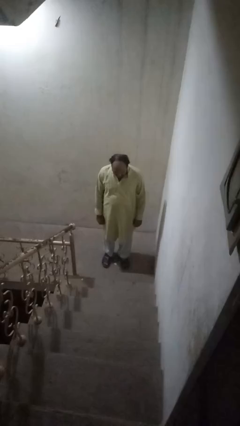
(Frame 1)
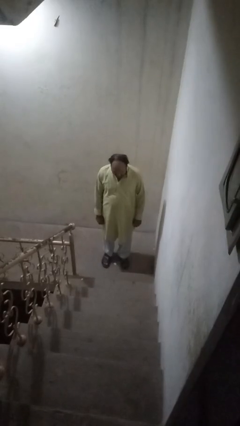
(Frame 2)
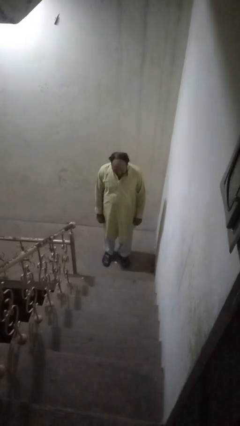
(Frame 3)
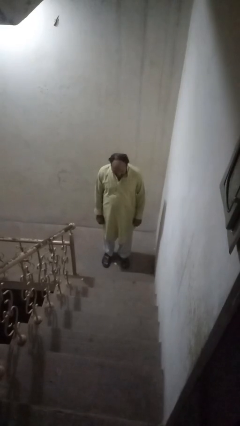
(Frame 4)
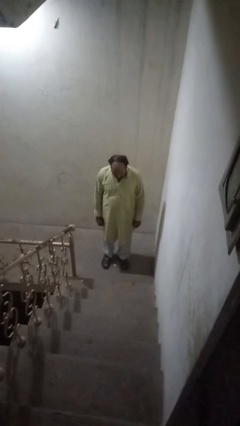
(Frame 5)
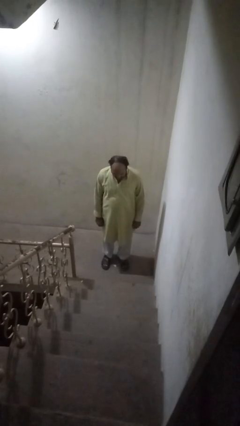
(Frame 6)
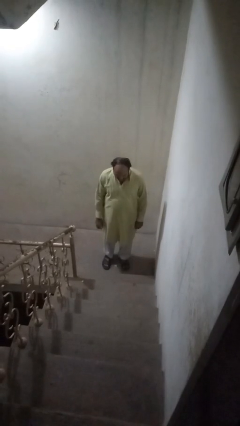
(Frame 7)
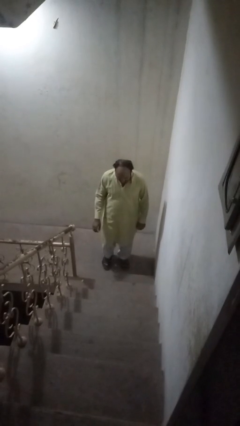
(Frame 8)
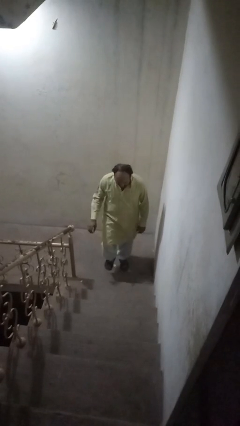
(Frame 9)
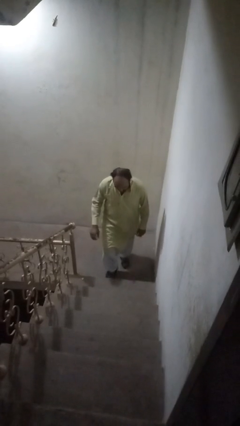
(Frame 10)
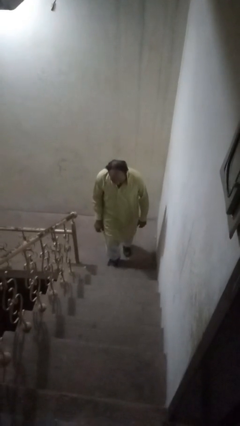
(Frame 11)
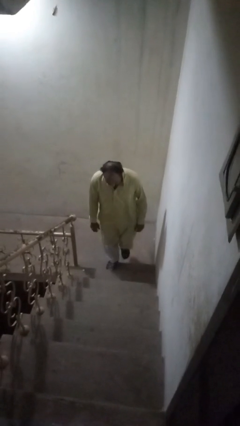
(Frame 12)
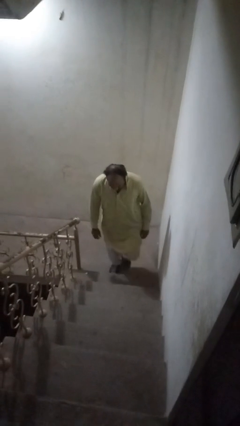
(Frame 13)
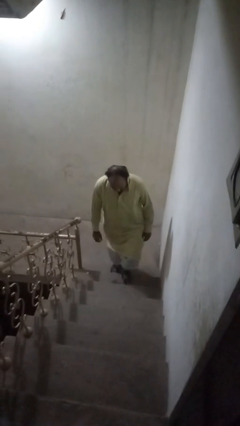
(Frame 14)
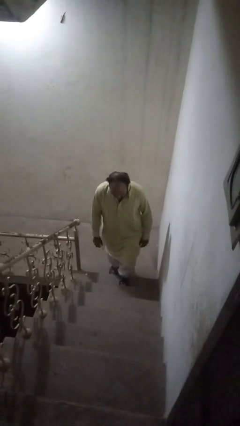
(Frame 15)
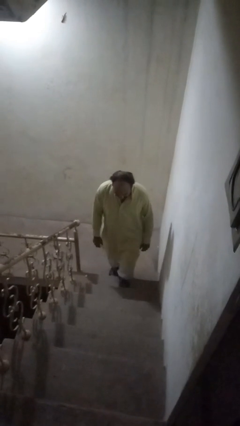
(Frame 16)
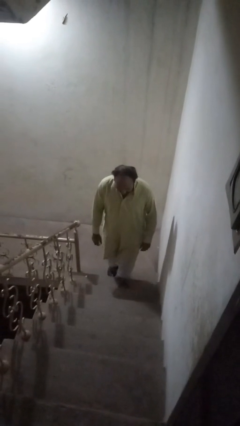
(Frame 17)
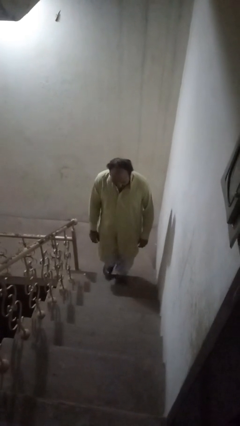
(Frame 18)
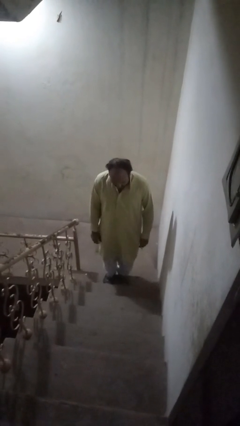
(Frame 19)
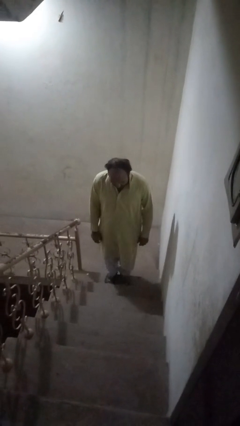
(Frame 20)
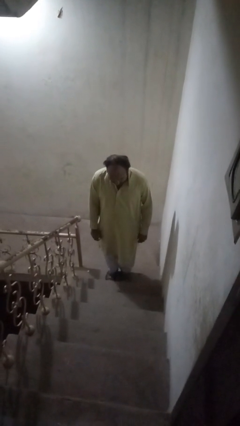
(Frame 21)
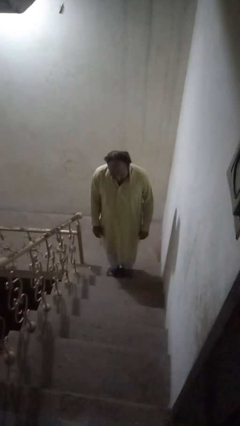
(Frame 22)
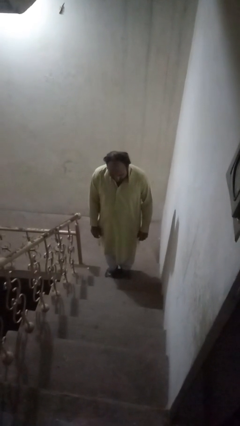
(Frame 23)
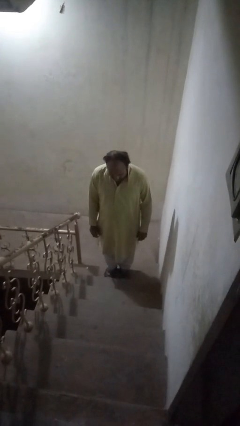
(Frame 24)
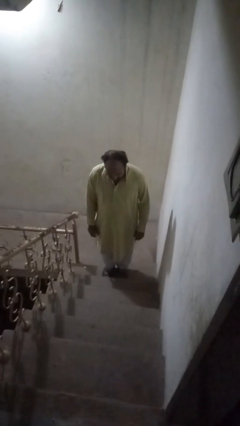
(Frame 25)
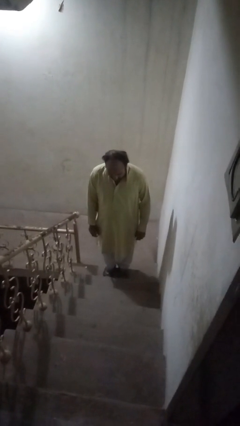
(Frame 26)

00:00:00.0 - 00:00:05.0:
person climbs up ladder

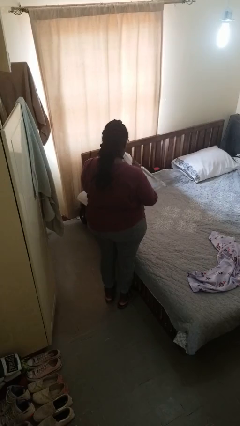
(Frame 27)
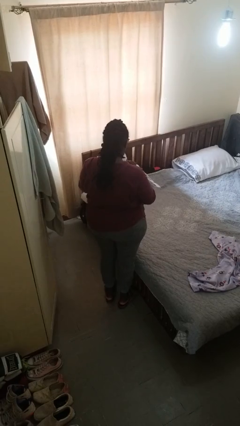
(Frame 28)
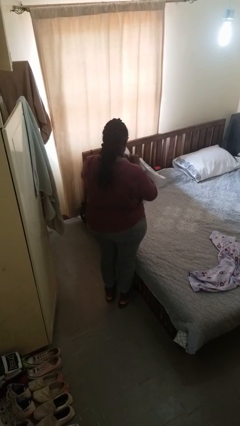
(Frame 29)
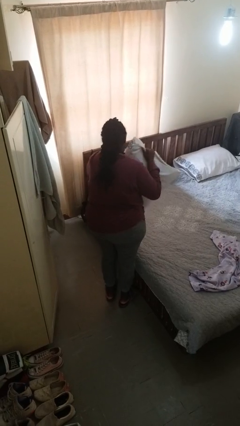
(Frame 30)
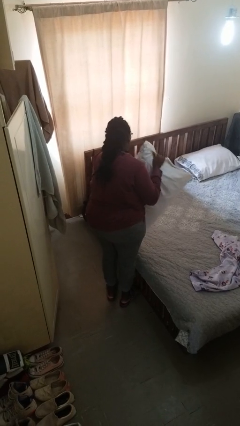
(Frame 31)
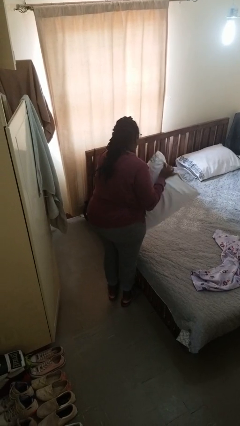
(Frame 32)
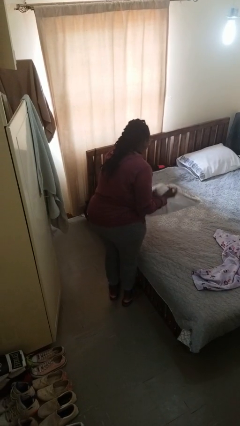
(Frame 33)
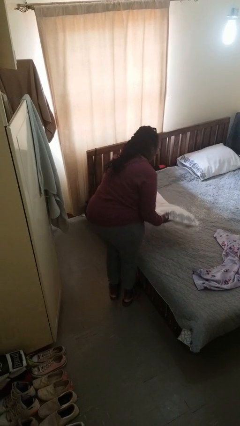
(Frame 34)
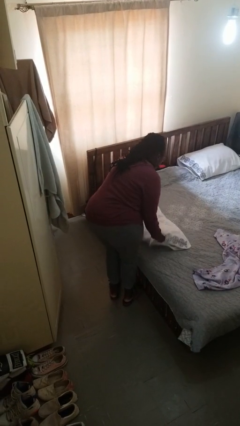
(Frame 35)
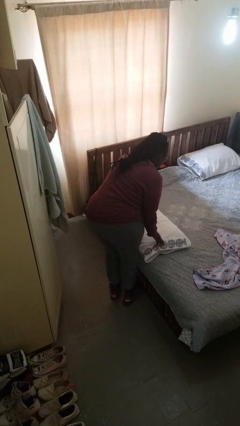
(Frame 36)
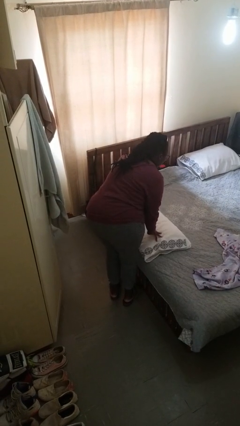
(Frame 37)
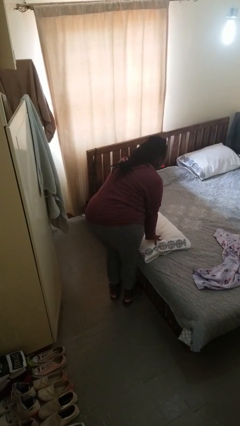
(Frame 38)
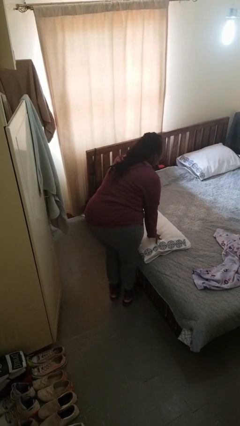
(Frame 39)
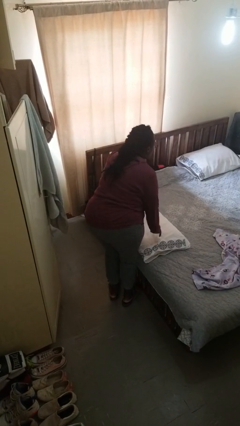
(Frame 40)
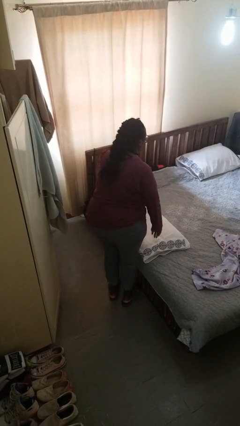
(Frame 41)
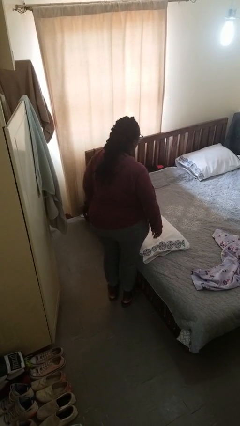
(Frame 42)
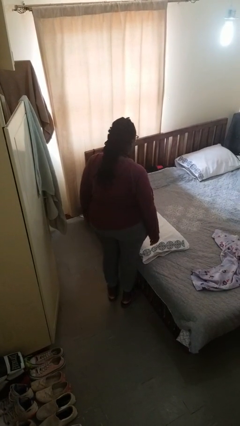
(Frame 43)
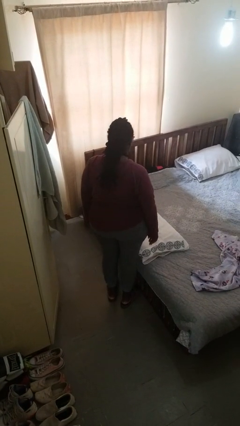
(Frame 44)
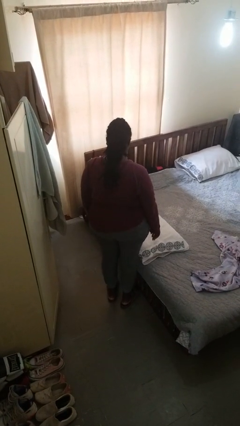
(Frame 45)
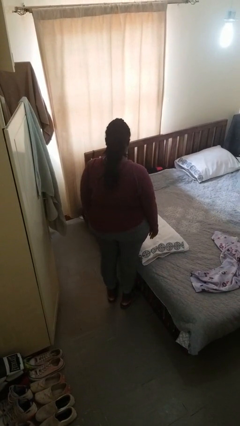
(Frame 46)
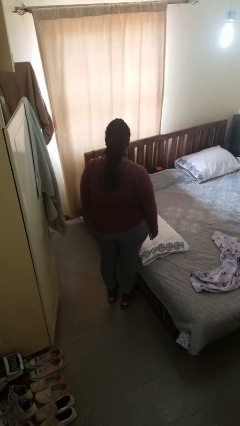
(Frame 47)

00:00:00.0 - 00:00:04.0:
person puts down object on bed

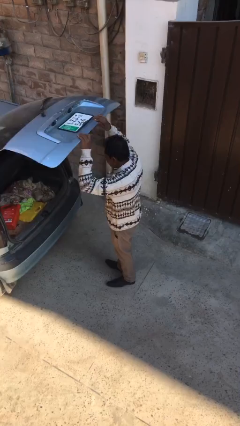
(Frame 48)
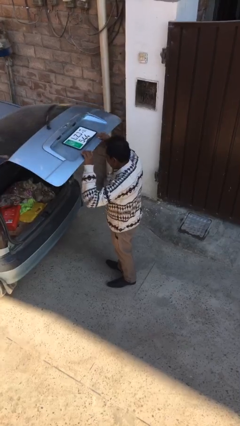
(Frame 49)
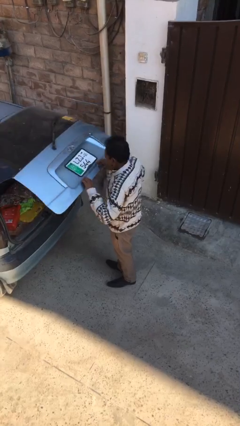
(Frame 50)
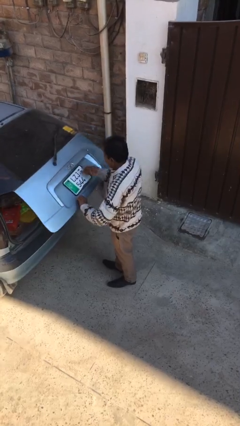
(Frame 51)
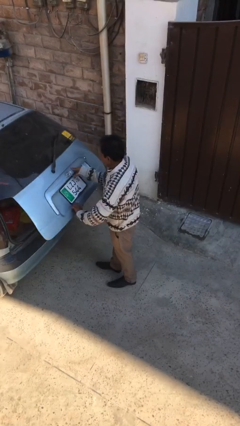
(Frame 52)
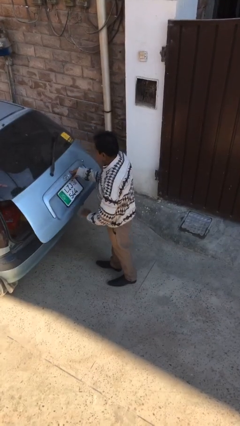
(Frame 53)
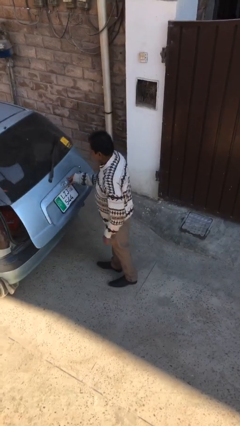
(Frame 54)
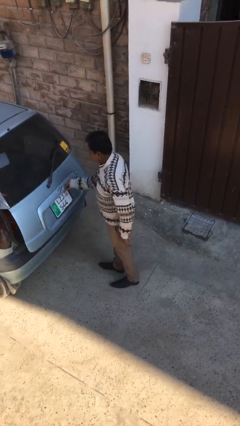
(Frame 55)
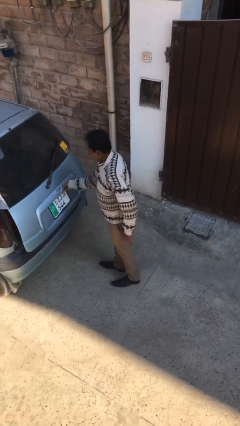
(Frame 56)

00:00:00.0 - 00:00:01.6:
person closes car trunk

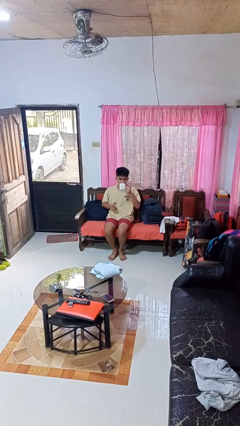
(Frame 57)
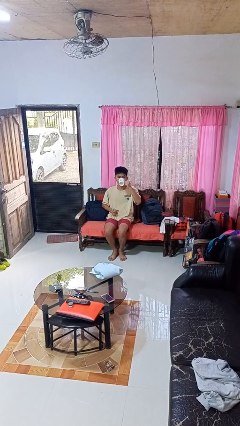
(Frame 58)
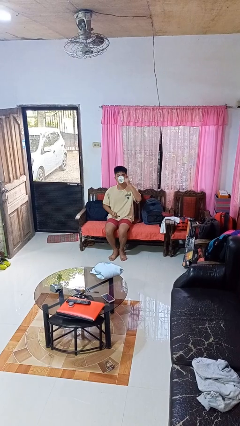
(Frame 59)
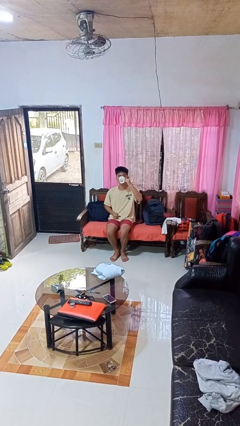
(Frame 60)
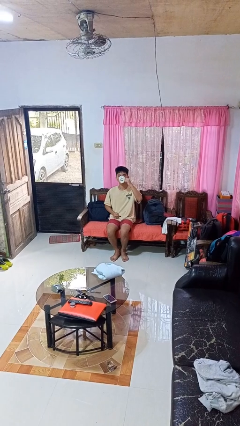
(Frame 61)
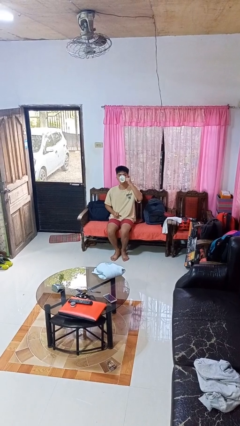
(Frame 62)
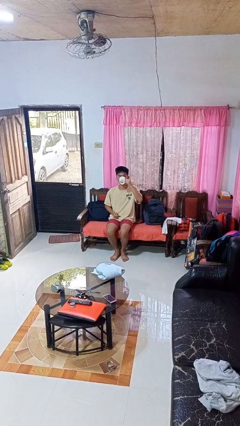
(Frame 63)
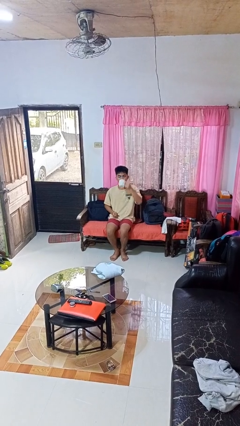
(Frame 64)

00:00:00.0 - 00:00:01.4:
person drinks from mug

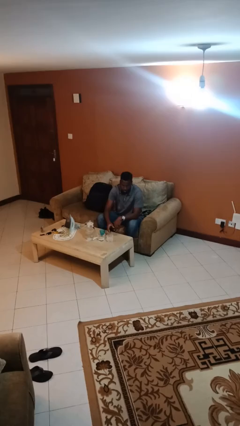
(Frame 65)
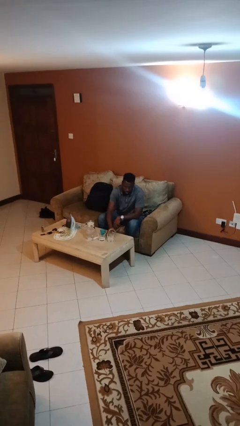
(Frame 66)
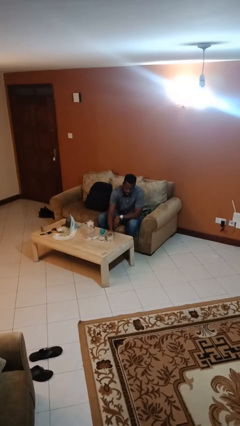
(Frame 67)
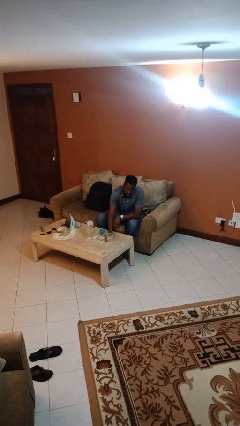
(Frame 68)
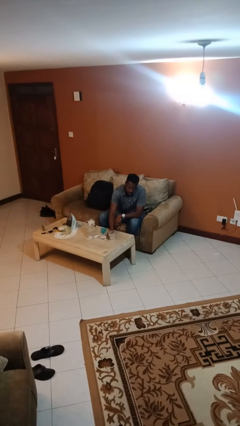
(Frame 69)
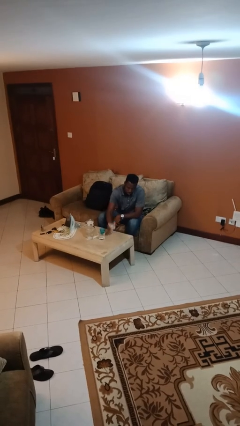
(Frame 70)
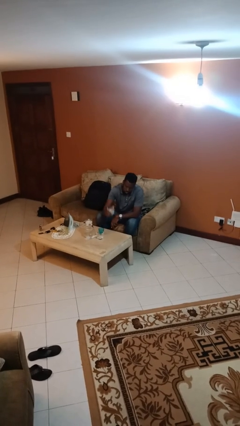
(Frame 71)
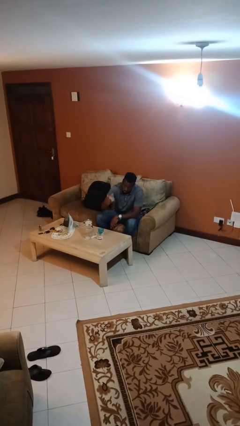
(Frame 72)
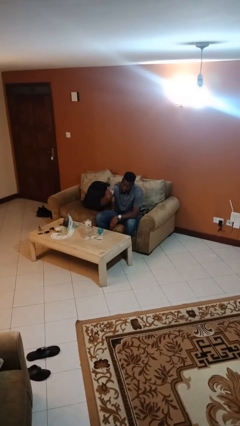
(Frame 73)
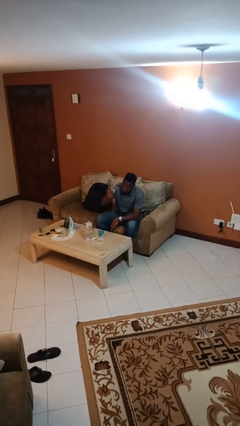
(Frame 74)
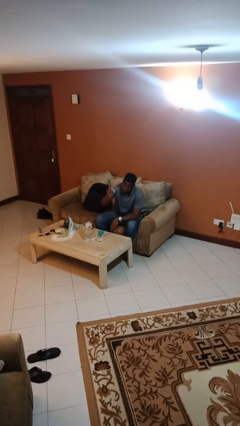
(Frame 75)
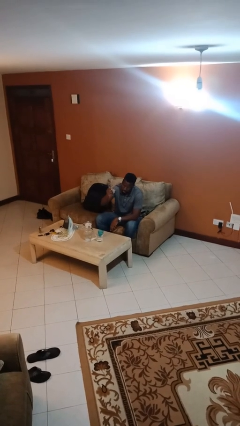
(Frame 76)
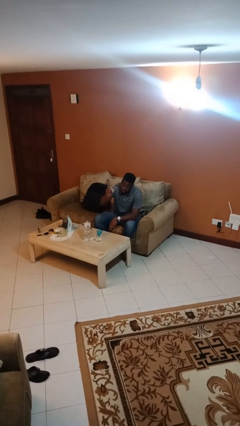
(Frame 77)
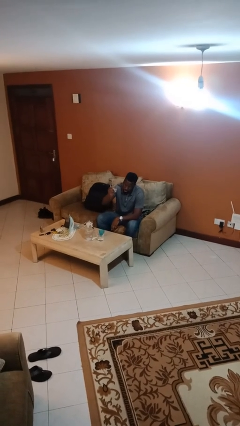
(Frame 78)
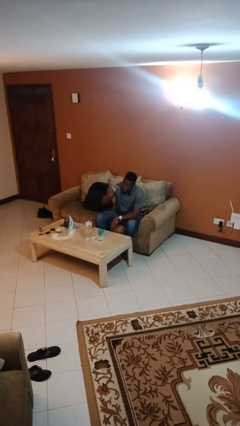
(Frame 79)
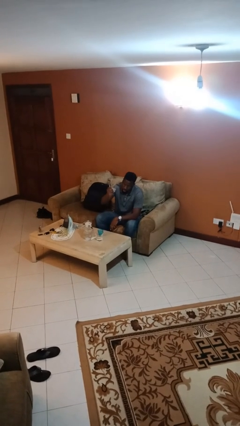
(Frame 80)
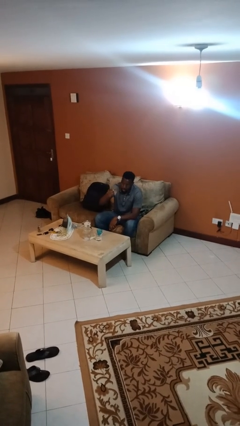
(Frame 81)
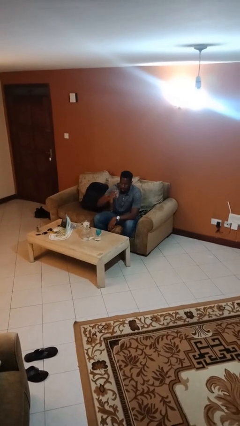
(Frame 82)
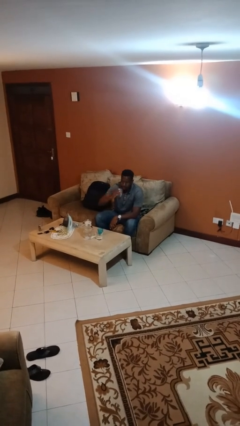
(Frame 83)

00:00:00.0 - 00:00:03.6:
person picks up object from table

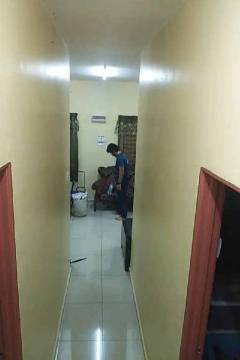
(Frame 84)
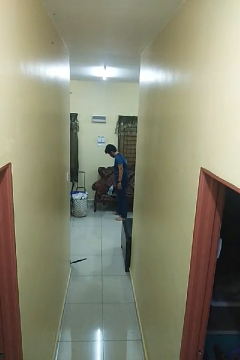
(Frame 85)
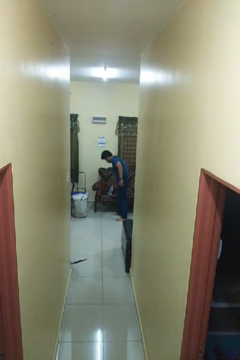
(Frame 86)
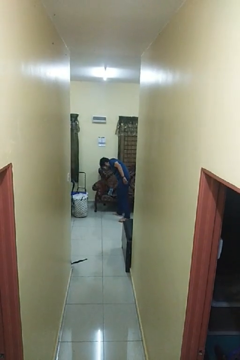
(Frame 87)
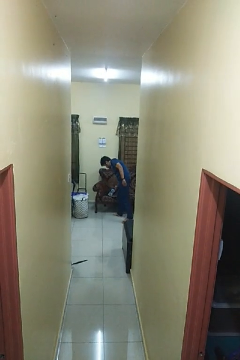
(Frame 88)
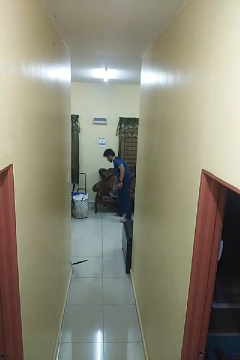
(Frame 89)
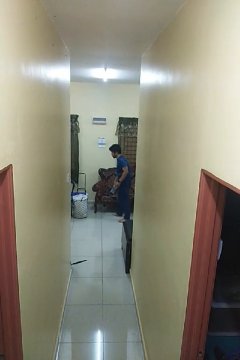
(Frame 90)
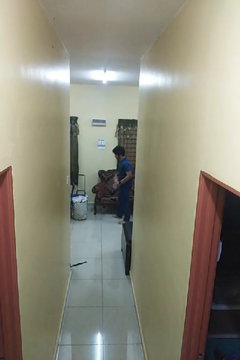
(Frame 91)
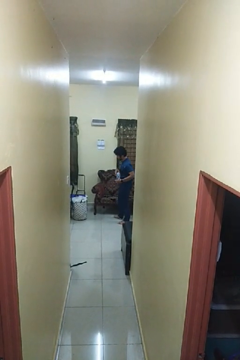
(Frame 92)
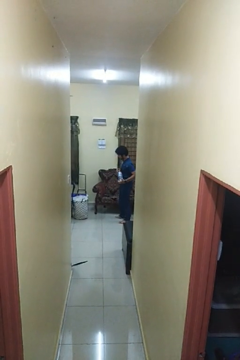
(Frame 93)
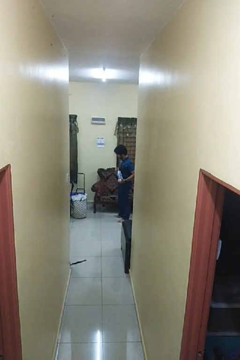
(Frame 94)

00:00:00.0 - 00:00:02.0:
person picks up object from couch
